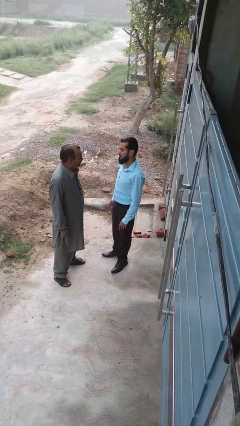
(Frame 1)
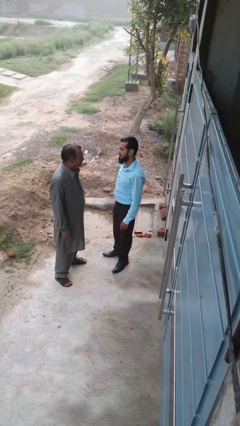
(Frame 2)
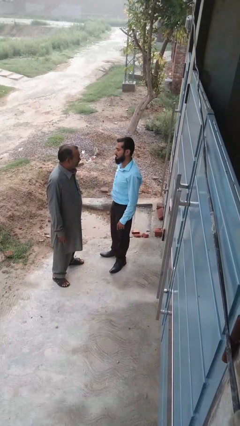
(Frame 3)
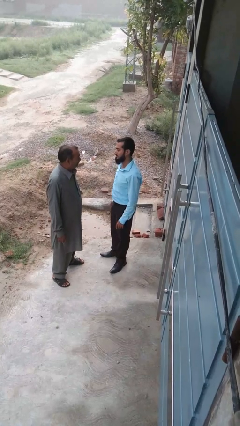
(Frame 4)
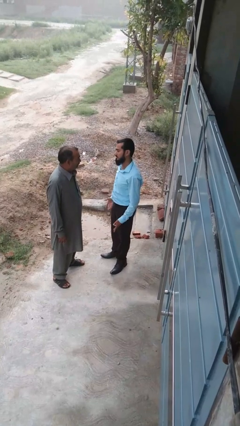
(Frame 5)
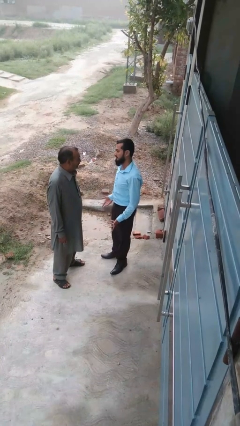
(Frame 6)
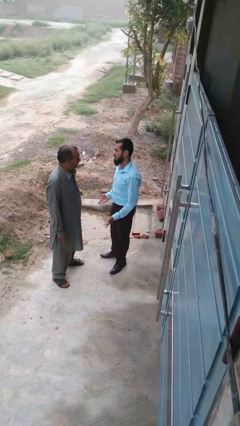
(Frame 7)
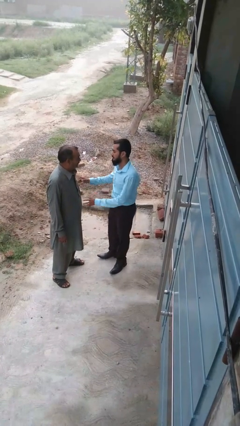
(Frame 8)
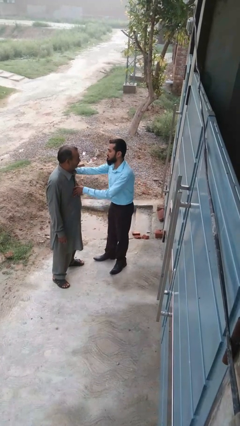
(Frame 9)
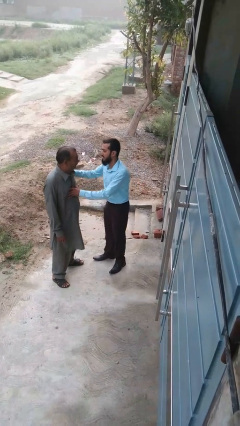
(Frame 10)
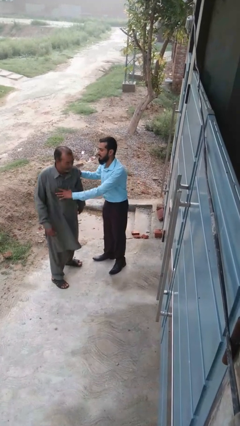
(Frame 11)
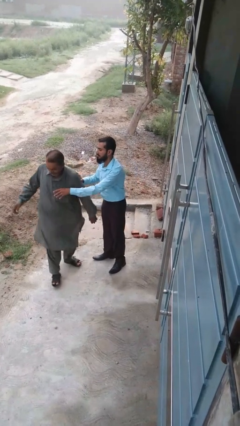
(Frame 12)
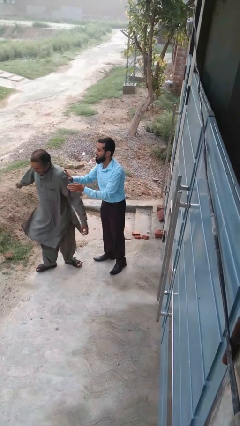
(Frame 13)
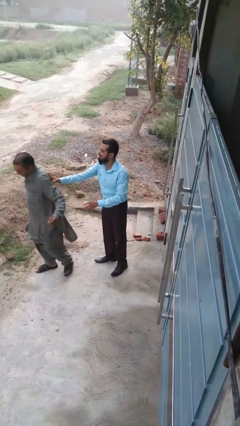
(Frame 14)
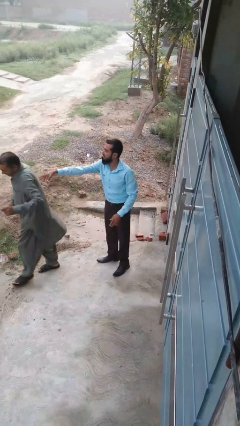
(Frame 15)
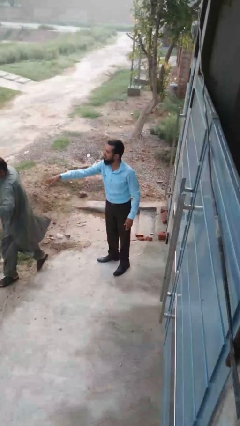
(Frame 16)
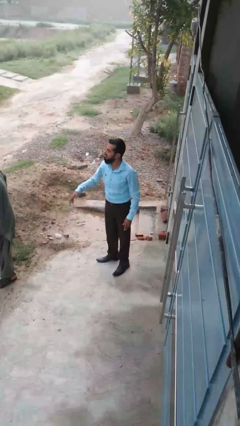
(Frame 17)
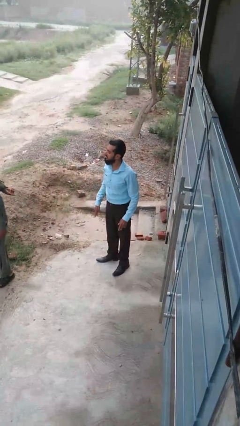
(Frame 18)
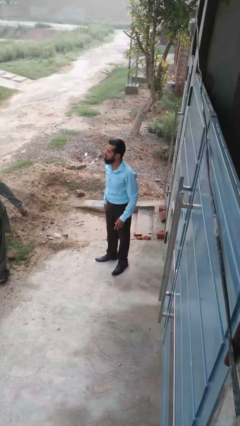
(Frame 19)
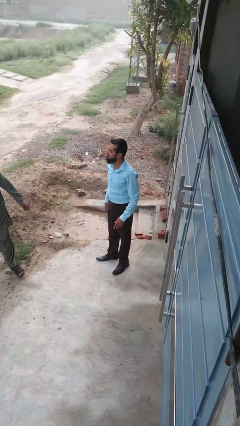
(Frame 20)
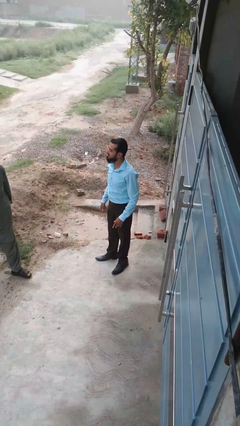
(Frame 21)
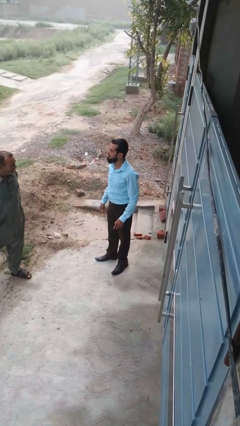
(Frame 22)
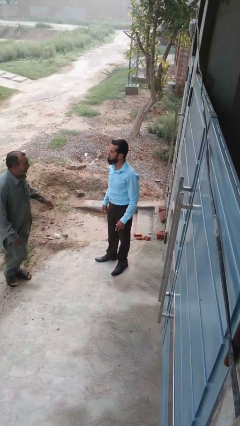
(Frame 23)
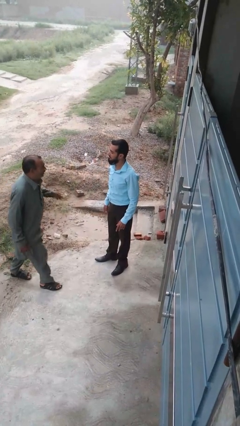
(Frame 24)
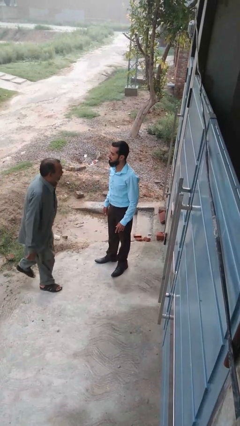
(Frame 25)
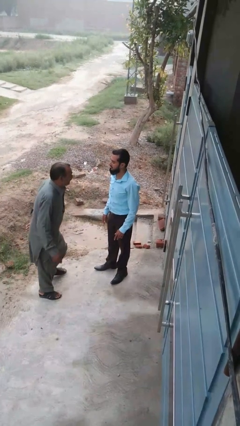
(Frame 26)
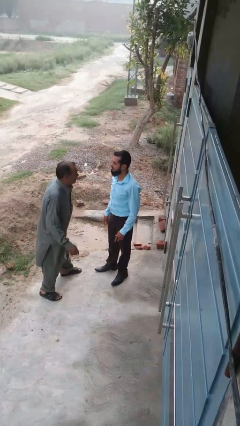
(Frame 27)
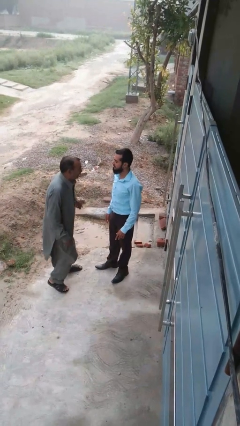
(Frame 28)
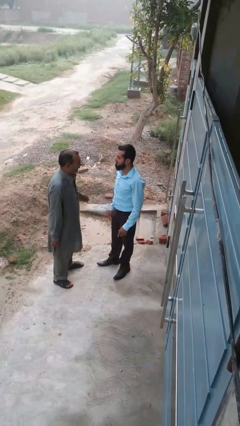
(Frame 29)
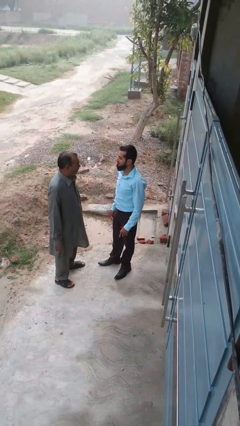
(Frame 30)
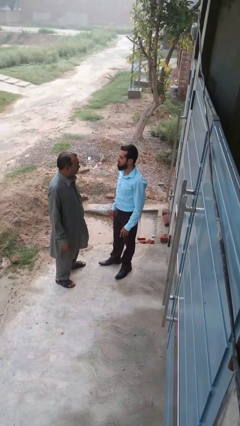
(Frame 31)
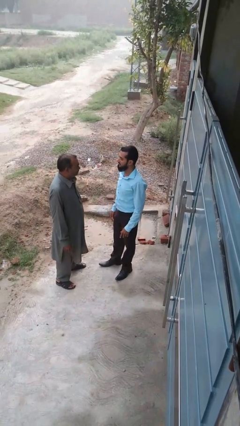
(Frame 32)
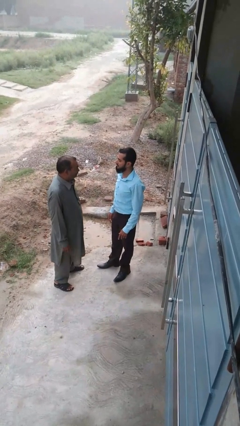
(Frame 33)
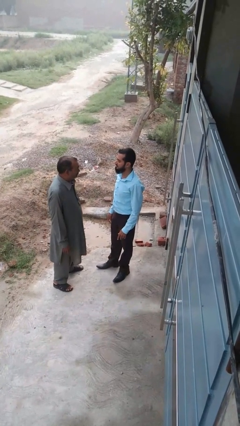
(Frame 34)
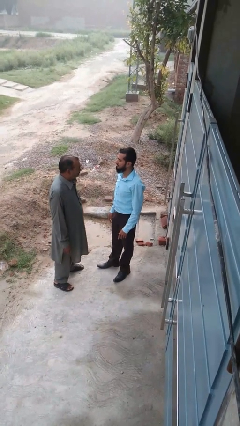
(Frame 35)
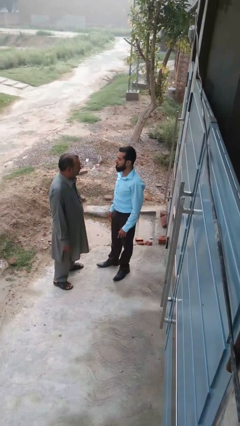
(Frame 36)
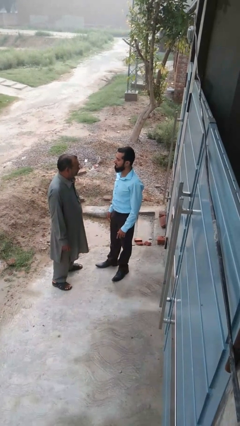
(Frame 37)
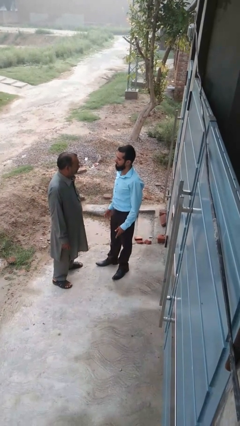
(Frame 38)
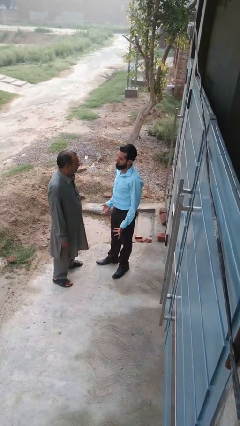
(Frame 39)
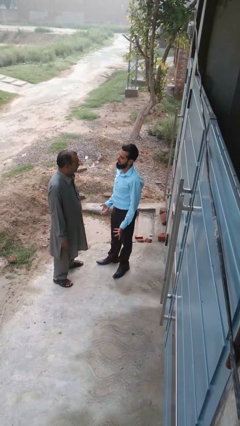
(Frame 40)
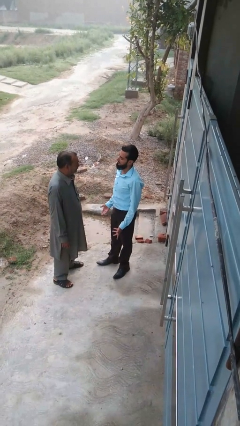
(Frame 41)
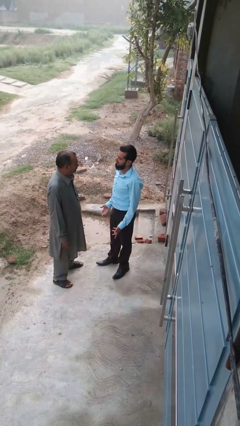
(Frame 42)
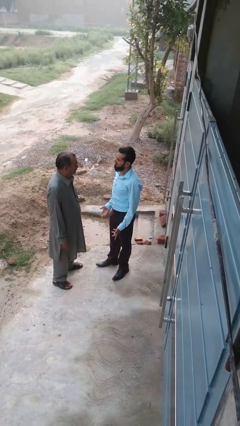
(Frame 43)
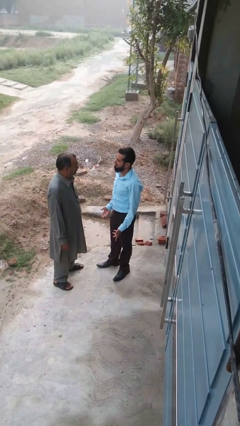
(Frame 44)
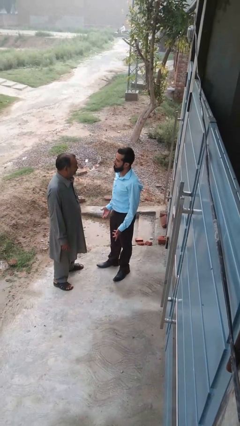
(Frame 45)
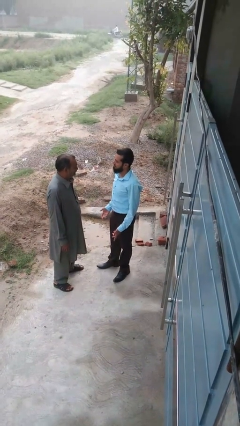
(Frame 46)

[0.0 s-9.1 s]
person shoves person

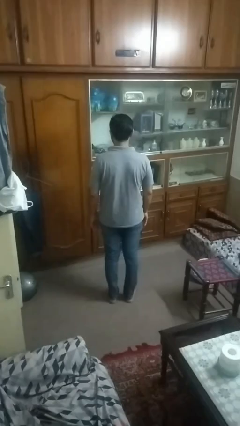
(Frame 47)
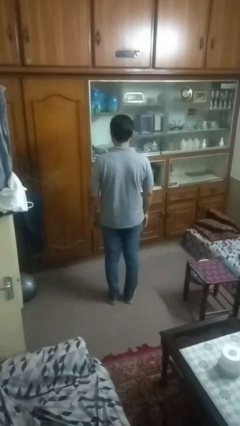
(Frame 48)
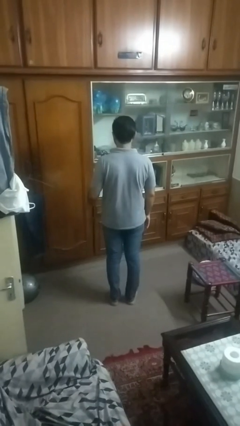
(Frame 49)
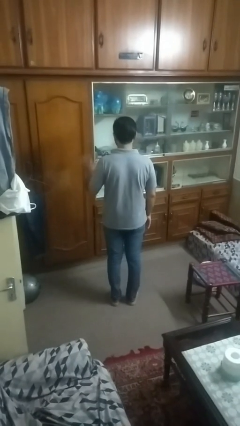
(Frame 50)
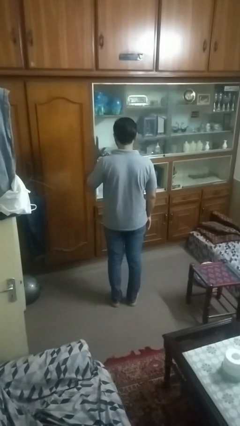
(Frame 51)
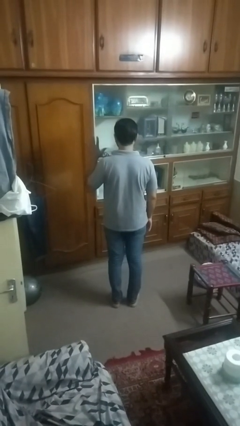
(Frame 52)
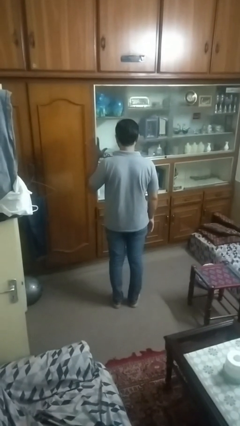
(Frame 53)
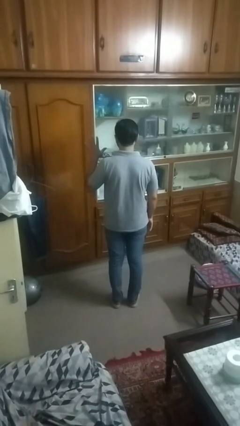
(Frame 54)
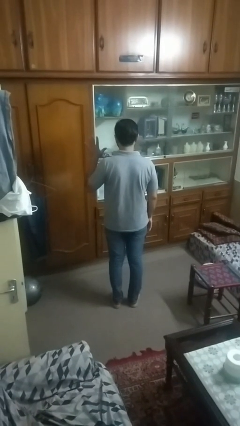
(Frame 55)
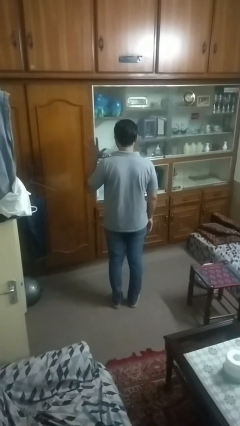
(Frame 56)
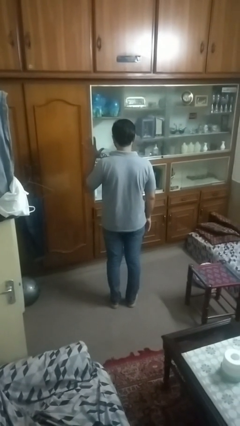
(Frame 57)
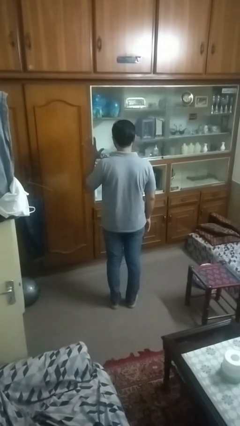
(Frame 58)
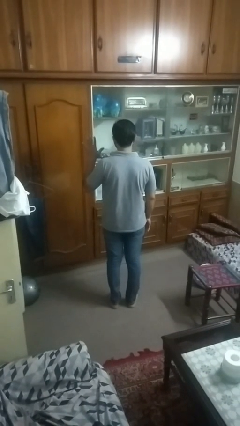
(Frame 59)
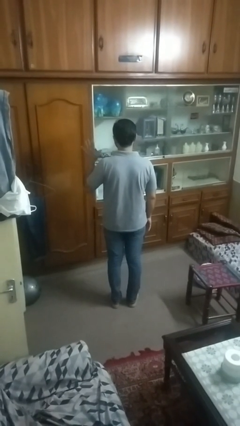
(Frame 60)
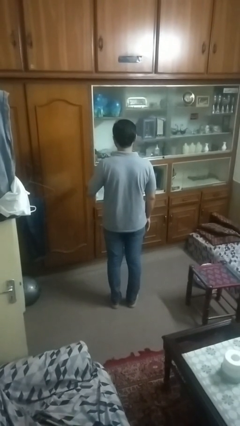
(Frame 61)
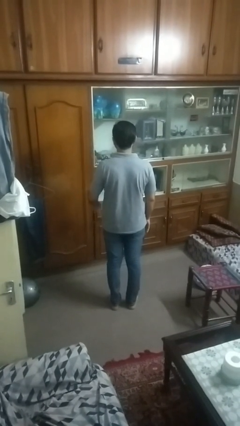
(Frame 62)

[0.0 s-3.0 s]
person gestures number five

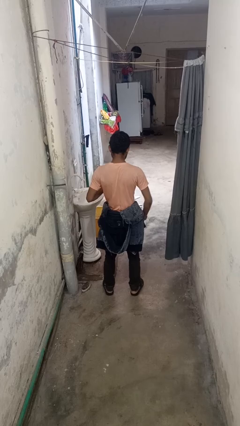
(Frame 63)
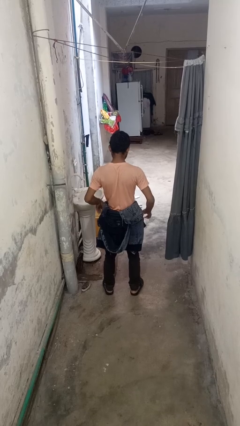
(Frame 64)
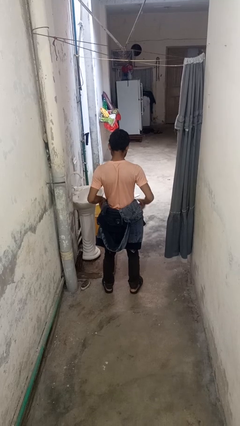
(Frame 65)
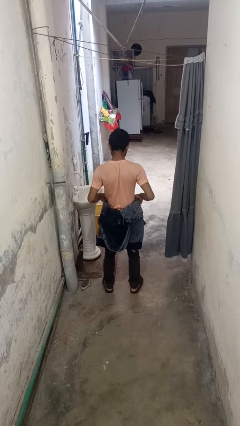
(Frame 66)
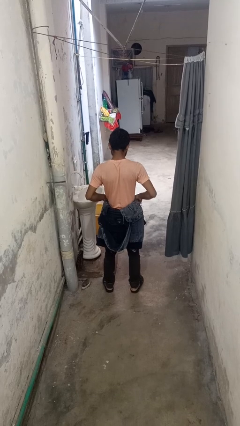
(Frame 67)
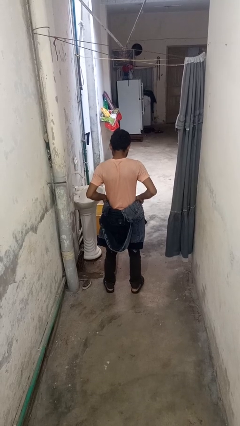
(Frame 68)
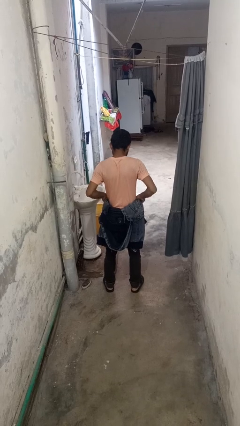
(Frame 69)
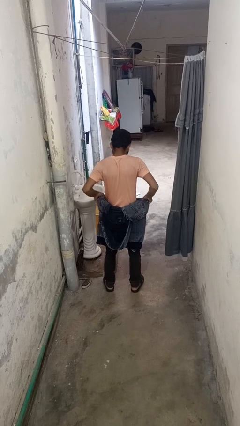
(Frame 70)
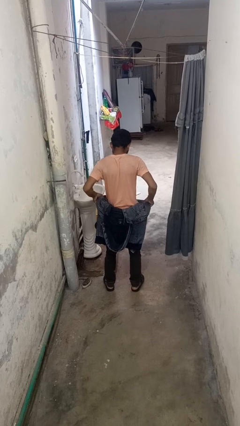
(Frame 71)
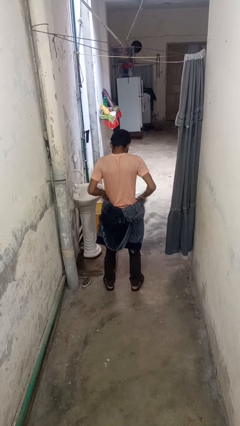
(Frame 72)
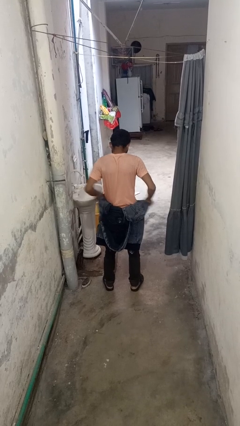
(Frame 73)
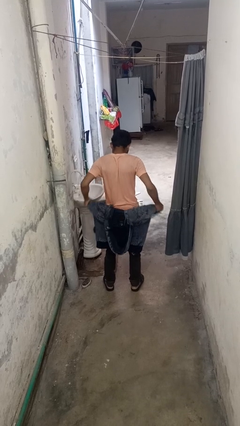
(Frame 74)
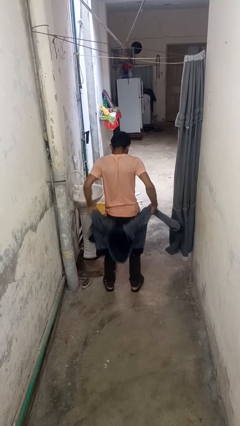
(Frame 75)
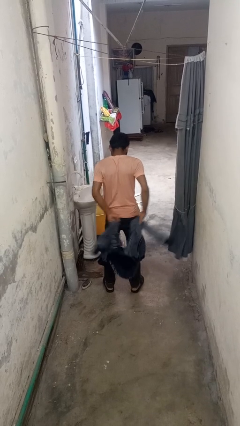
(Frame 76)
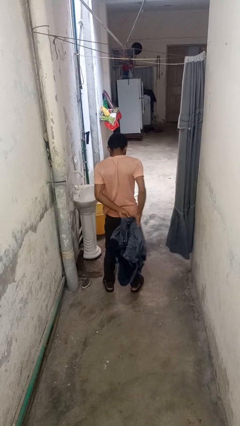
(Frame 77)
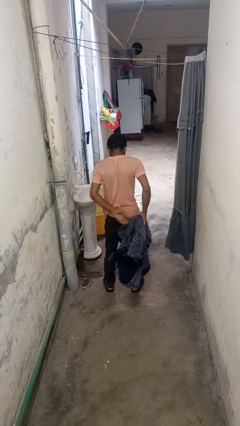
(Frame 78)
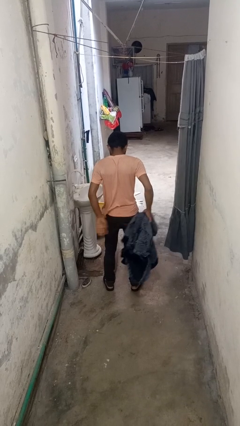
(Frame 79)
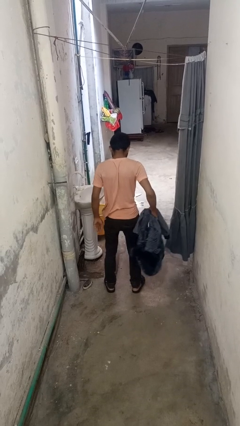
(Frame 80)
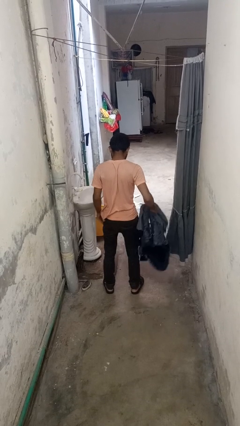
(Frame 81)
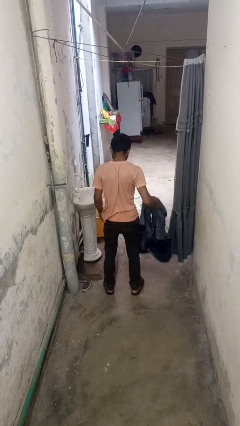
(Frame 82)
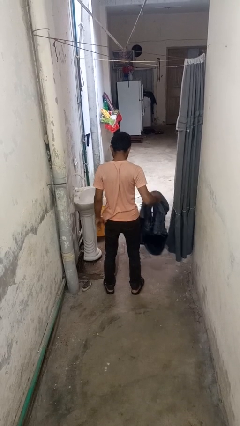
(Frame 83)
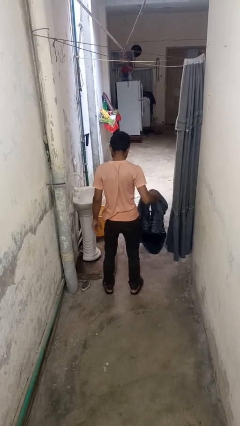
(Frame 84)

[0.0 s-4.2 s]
person unties jacket around waist

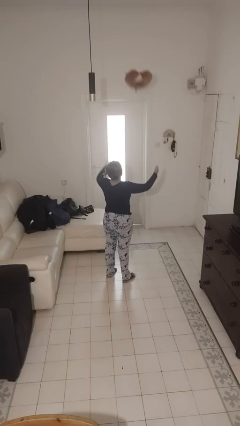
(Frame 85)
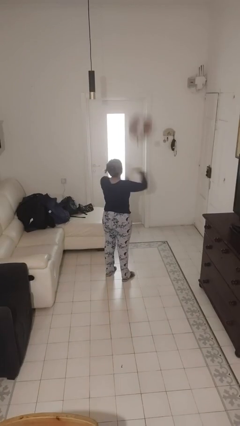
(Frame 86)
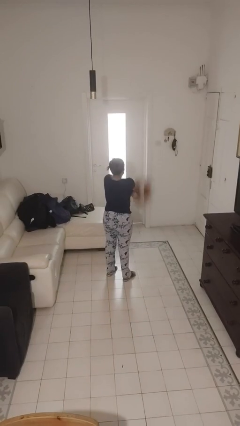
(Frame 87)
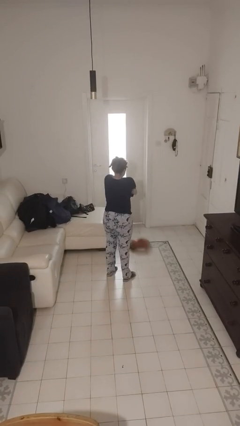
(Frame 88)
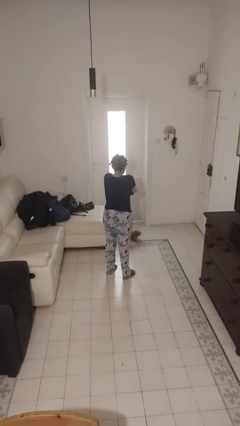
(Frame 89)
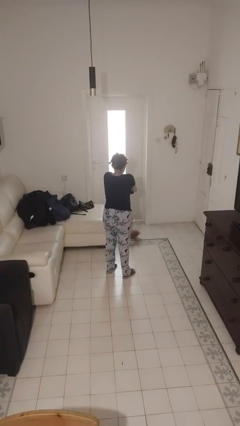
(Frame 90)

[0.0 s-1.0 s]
person catches dropped object

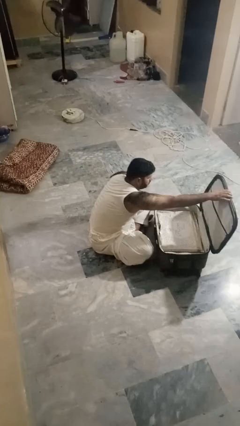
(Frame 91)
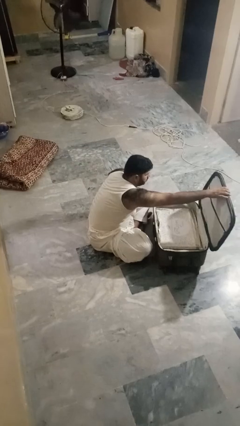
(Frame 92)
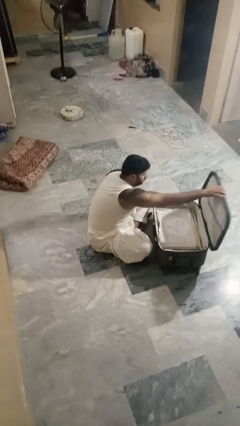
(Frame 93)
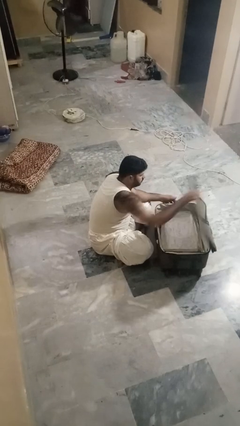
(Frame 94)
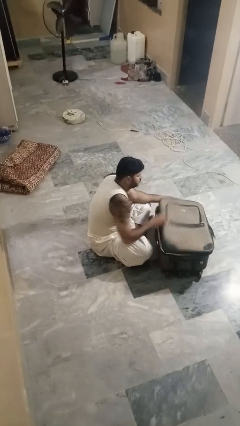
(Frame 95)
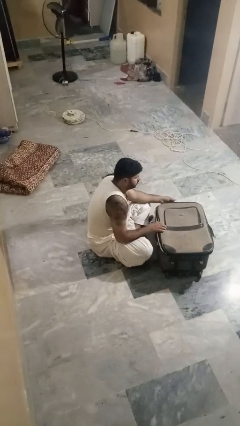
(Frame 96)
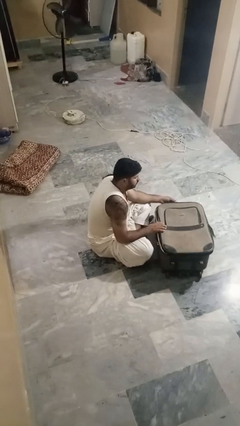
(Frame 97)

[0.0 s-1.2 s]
person closes suitcase
